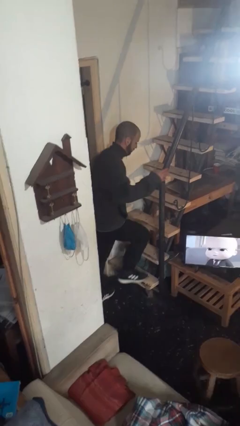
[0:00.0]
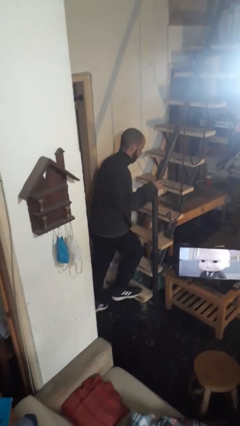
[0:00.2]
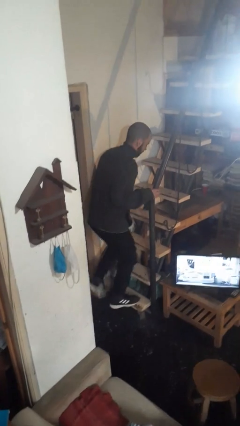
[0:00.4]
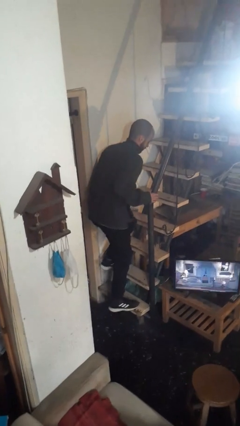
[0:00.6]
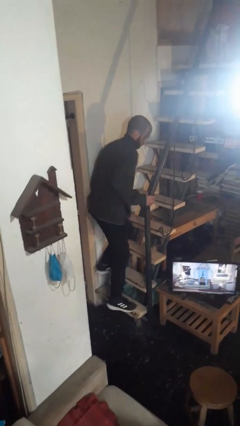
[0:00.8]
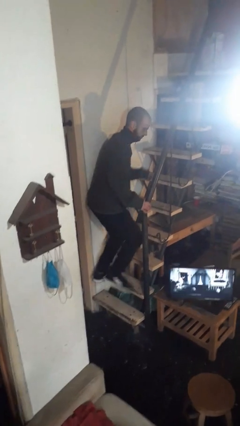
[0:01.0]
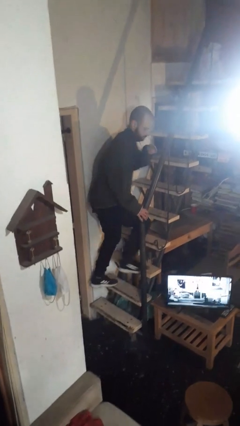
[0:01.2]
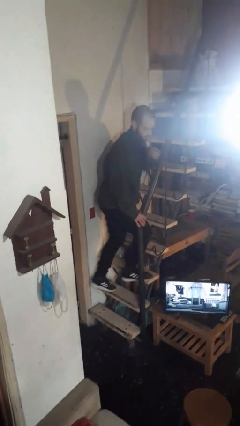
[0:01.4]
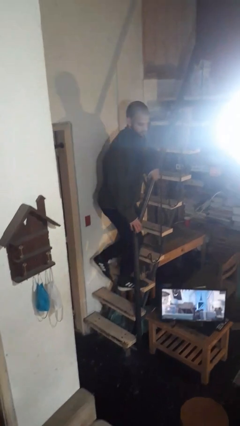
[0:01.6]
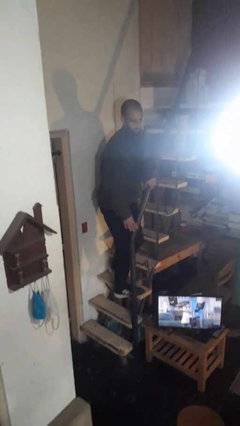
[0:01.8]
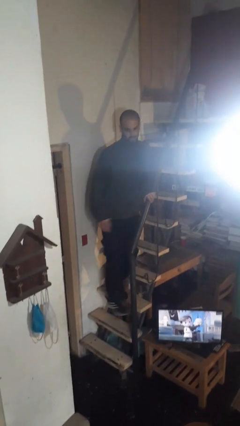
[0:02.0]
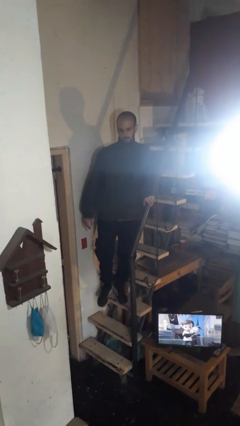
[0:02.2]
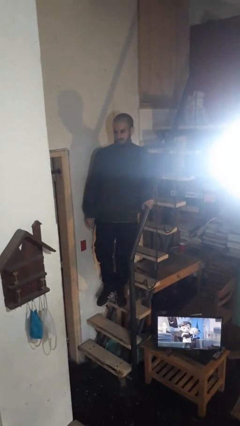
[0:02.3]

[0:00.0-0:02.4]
person climbs up stairs

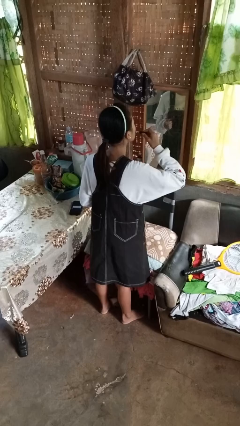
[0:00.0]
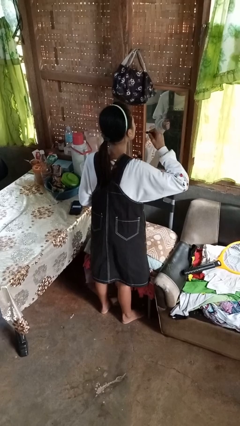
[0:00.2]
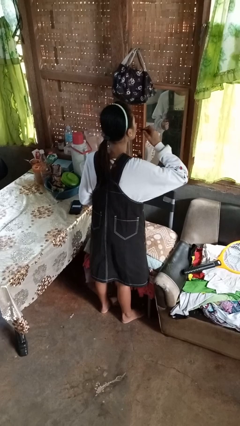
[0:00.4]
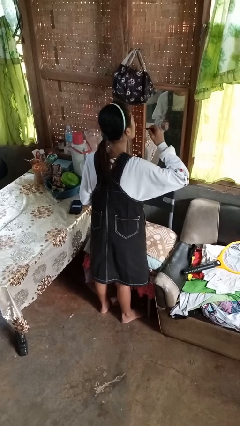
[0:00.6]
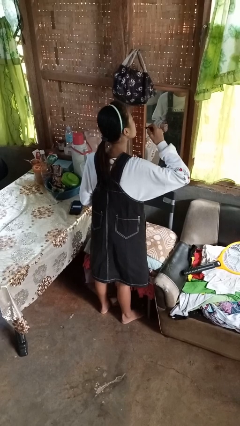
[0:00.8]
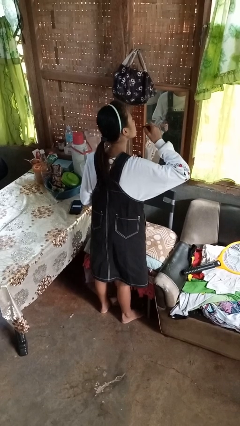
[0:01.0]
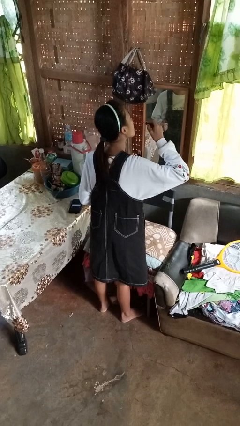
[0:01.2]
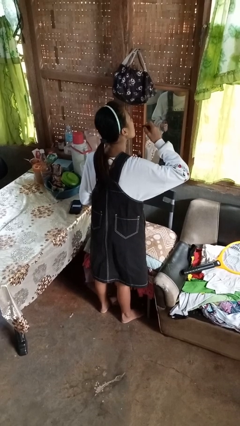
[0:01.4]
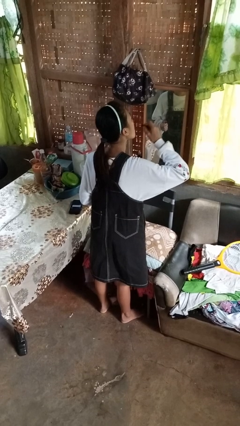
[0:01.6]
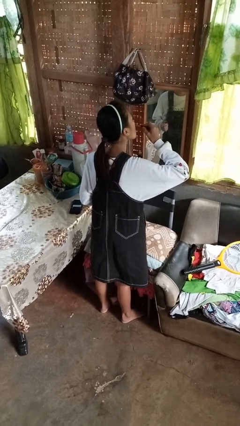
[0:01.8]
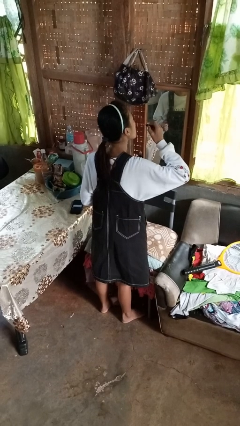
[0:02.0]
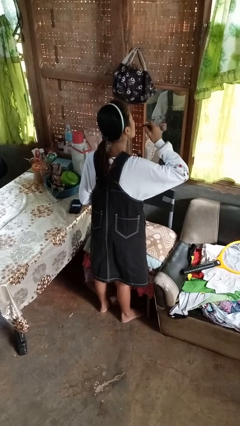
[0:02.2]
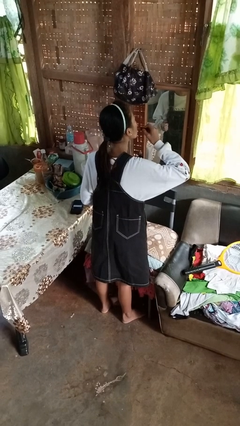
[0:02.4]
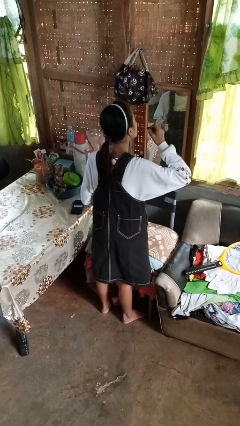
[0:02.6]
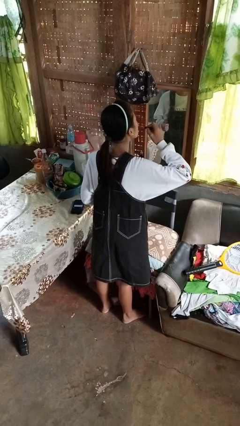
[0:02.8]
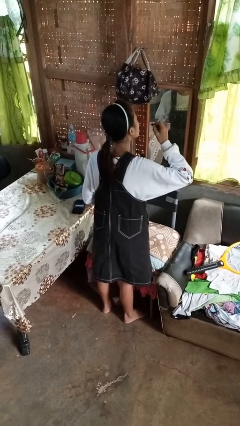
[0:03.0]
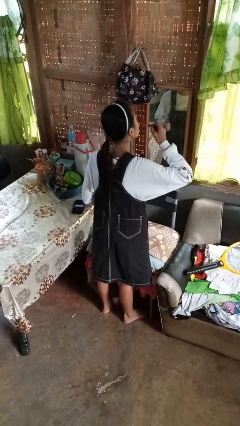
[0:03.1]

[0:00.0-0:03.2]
person applies lip makeup

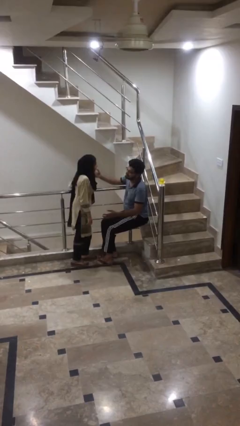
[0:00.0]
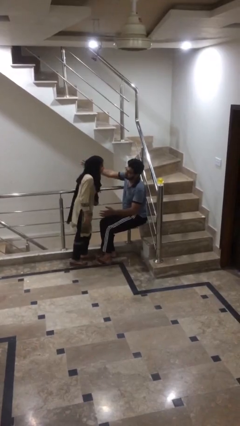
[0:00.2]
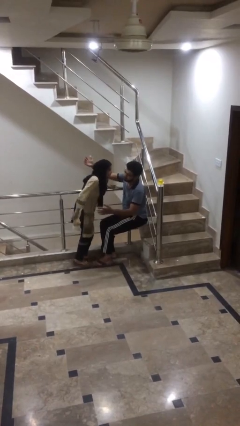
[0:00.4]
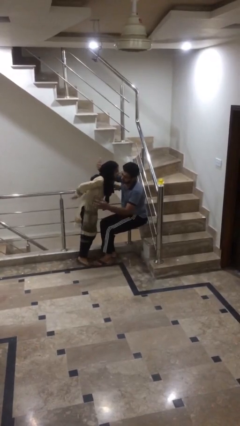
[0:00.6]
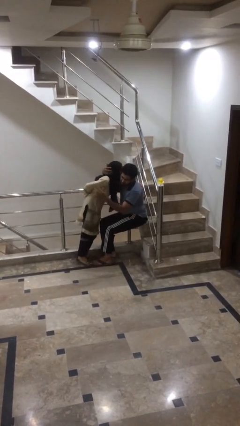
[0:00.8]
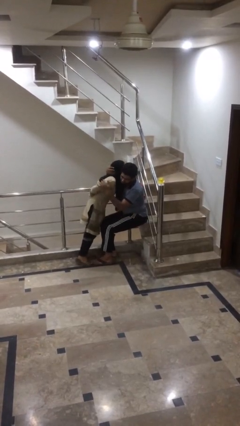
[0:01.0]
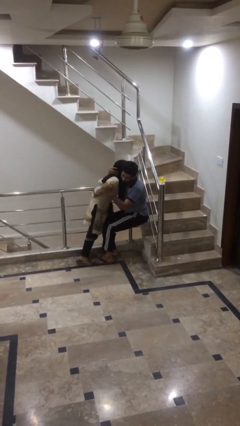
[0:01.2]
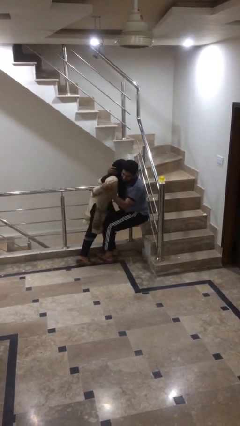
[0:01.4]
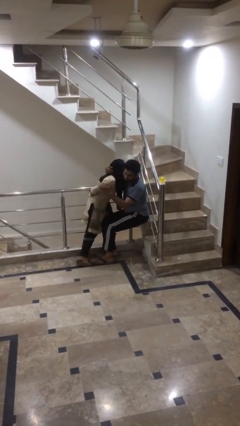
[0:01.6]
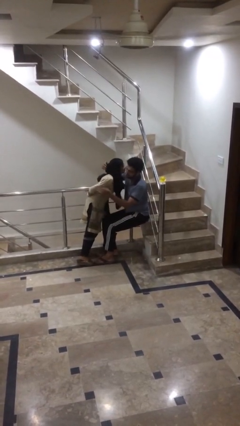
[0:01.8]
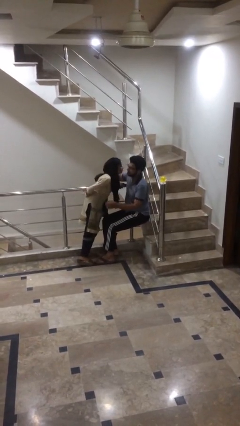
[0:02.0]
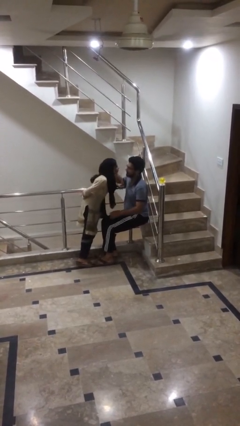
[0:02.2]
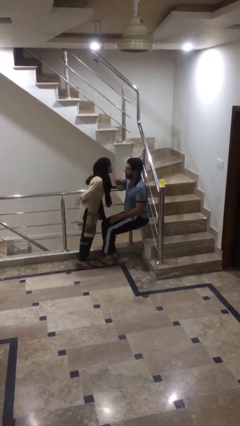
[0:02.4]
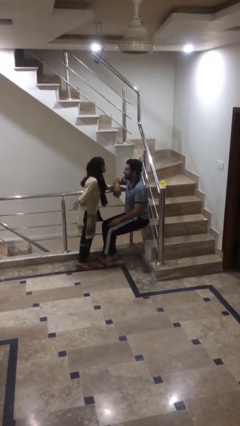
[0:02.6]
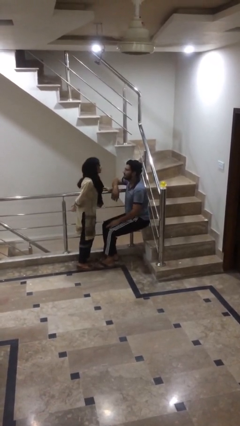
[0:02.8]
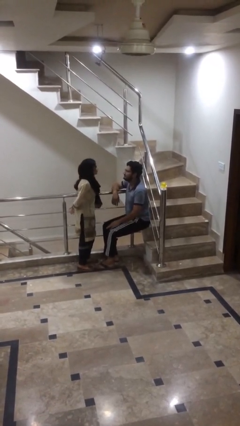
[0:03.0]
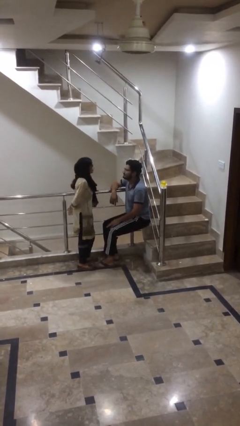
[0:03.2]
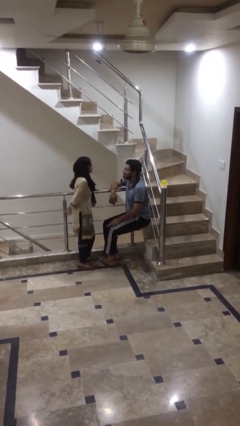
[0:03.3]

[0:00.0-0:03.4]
person embraces person

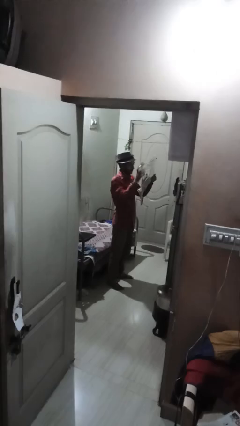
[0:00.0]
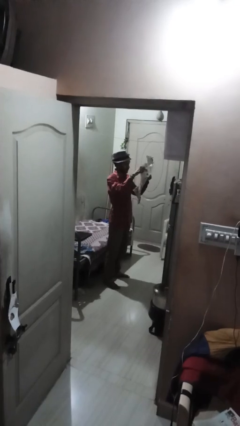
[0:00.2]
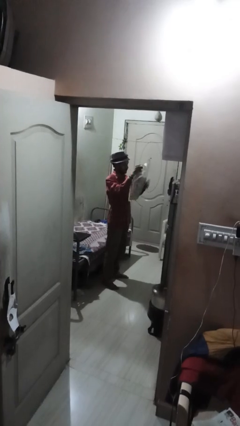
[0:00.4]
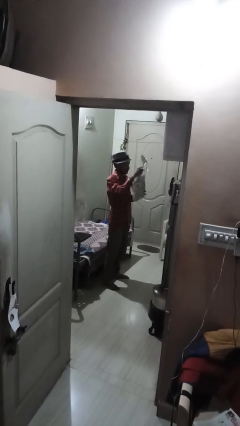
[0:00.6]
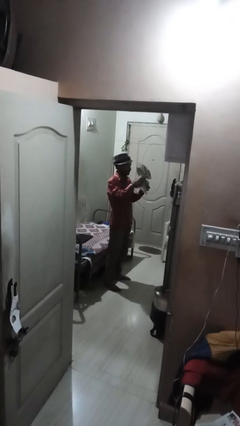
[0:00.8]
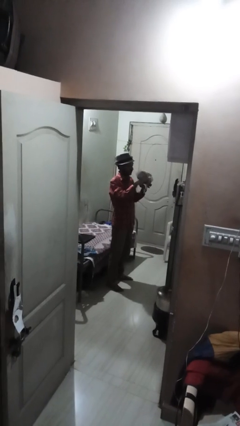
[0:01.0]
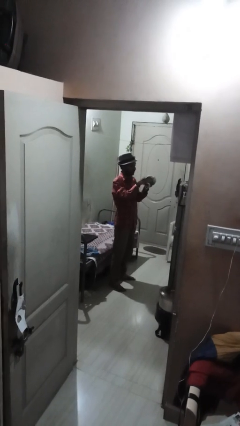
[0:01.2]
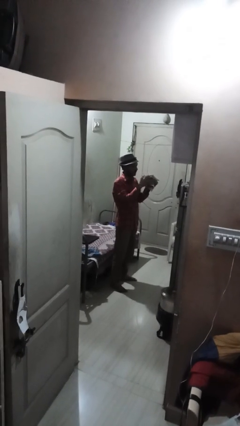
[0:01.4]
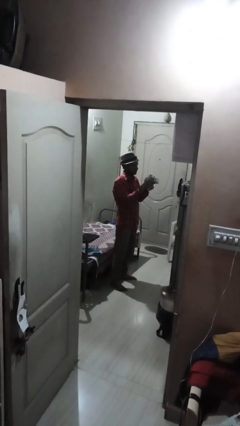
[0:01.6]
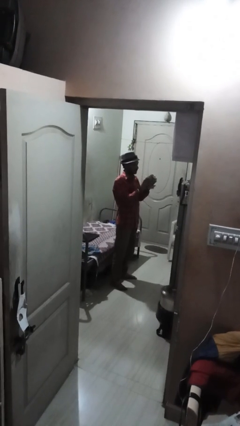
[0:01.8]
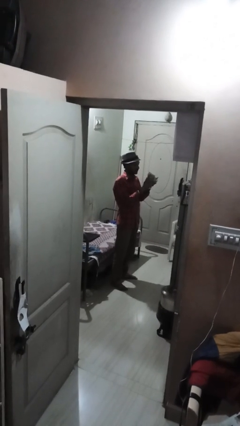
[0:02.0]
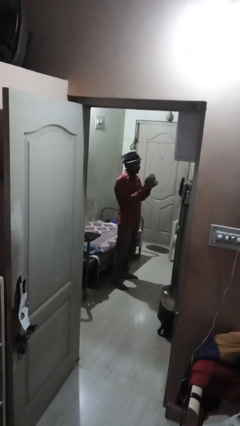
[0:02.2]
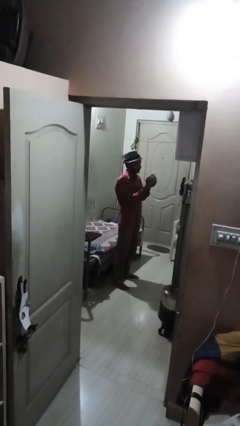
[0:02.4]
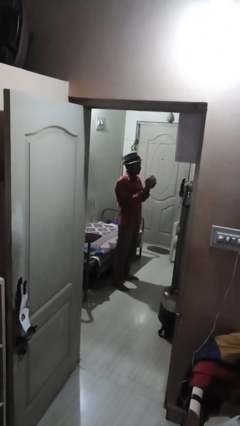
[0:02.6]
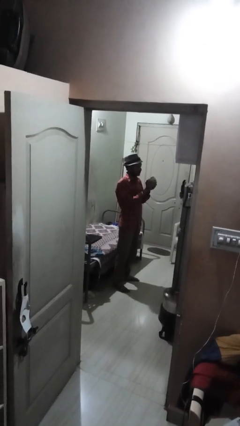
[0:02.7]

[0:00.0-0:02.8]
person crumples paper

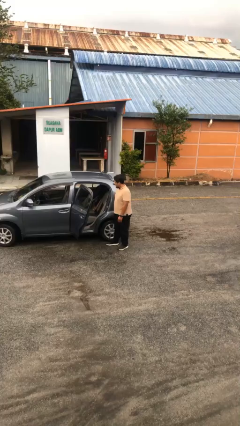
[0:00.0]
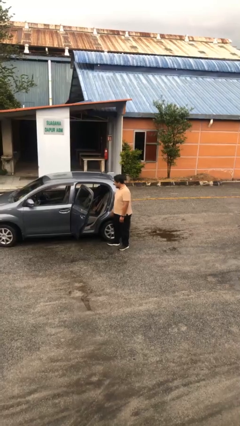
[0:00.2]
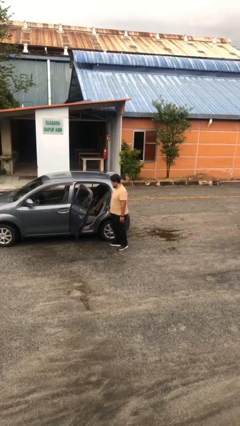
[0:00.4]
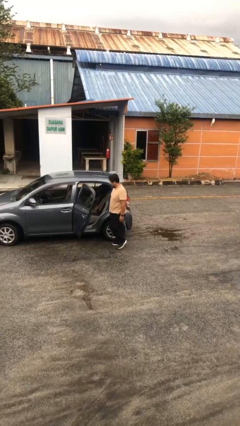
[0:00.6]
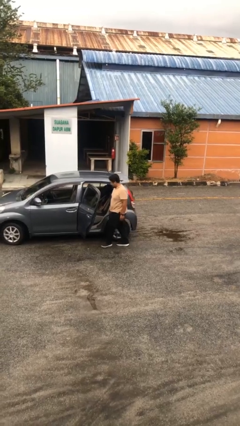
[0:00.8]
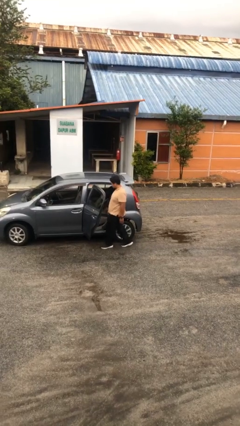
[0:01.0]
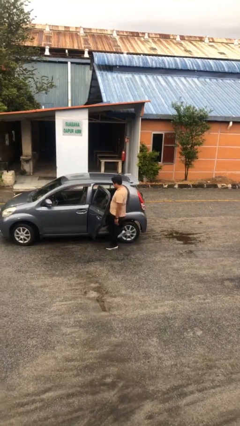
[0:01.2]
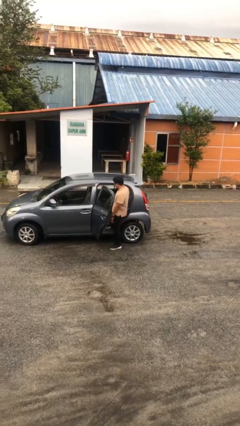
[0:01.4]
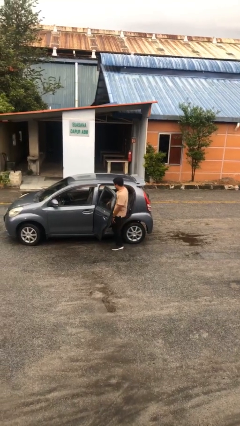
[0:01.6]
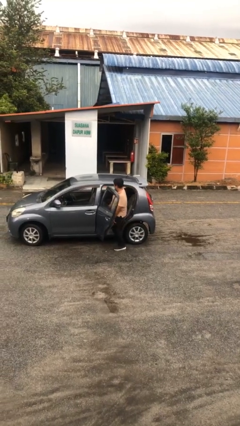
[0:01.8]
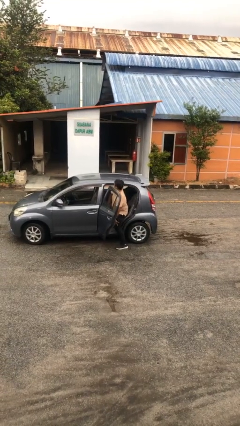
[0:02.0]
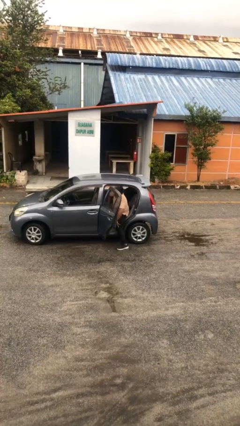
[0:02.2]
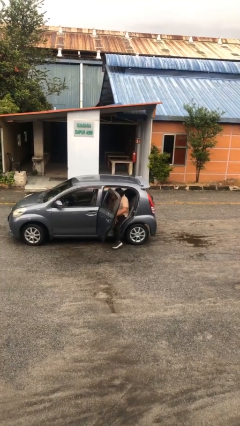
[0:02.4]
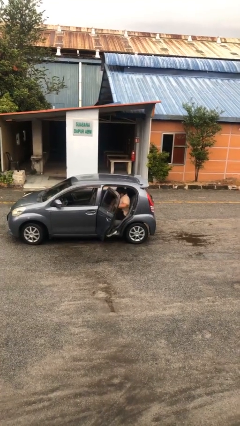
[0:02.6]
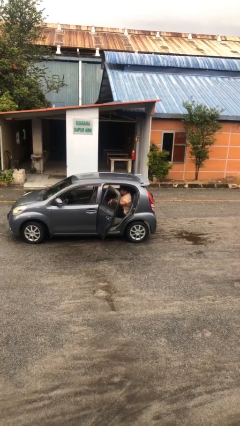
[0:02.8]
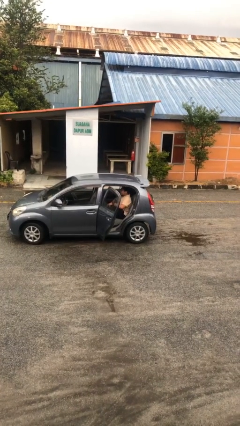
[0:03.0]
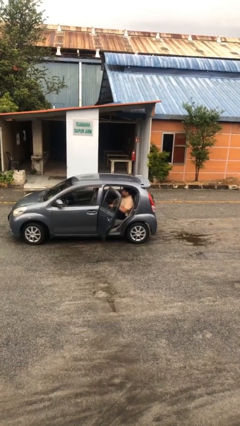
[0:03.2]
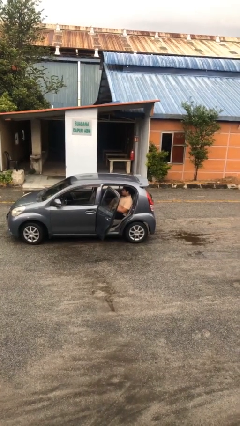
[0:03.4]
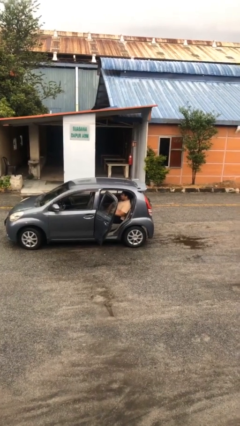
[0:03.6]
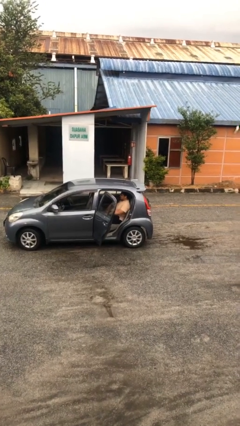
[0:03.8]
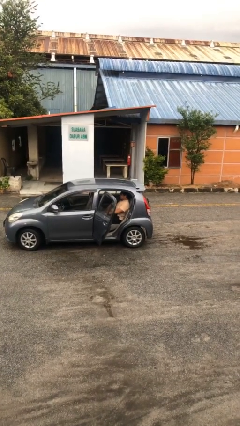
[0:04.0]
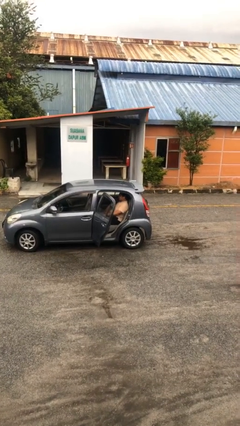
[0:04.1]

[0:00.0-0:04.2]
person enters car

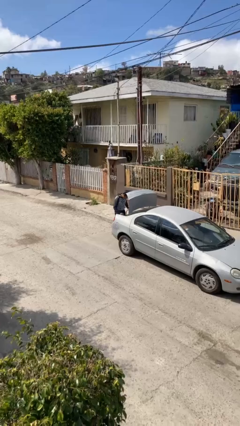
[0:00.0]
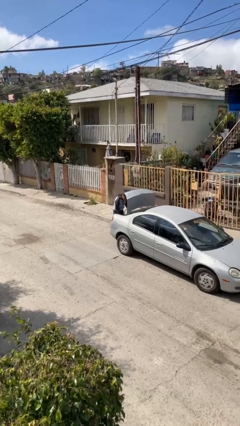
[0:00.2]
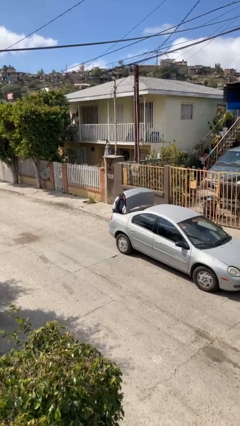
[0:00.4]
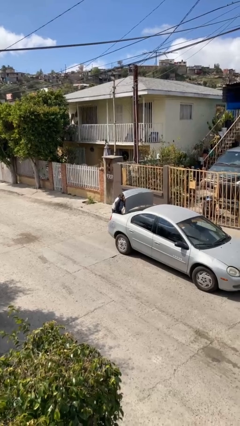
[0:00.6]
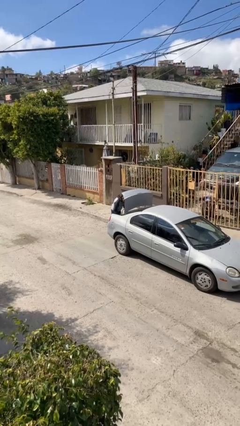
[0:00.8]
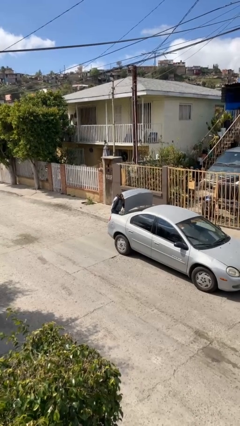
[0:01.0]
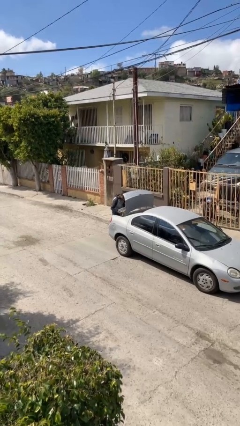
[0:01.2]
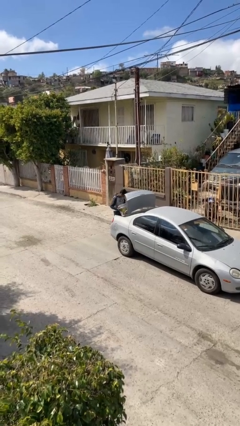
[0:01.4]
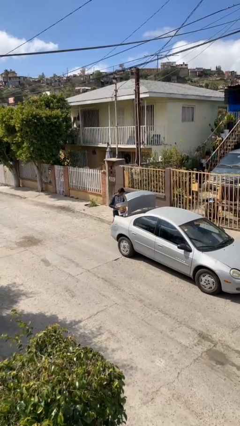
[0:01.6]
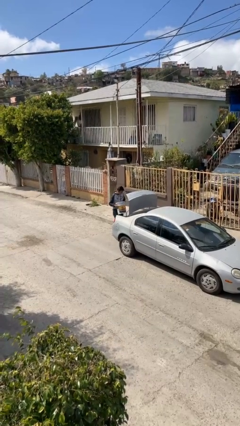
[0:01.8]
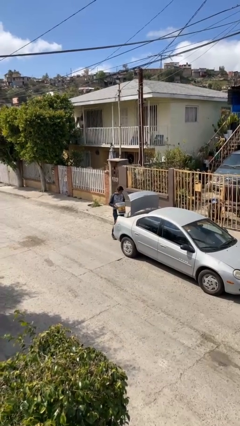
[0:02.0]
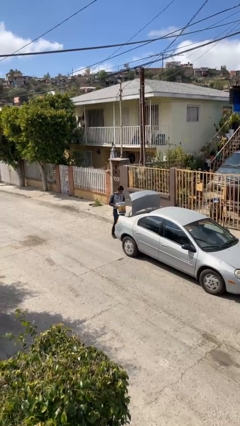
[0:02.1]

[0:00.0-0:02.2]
person unloads car
